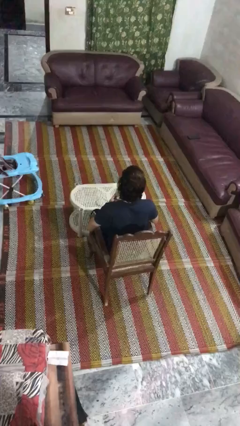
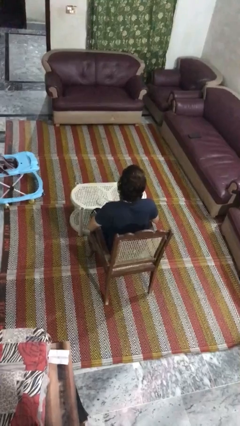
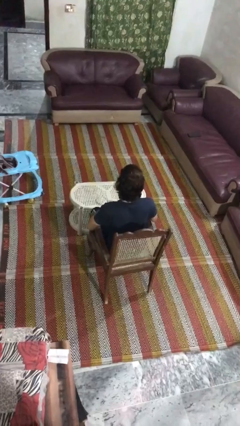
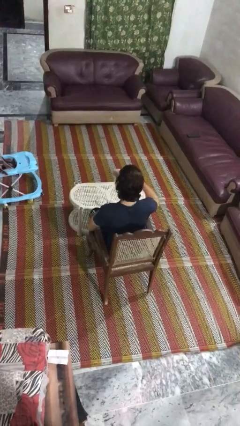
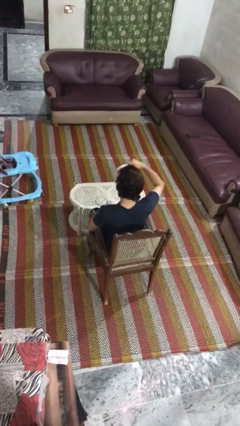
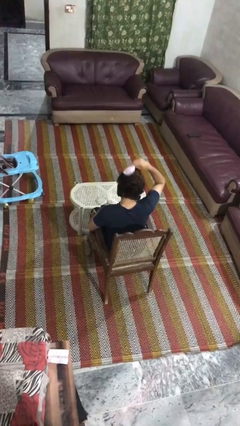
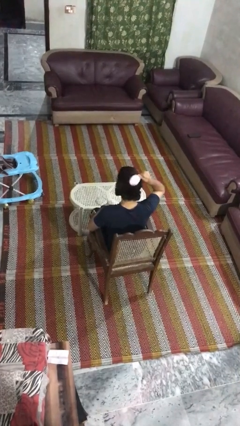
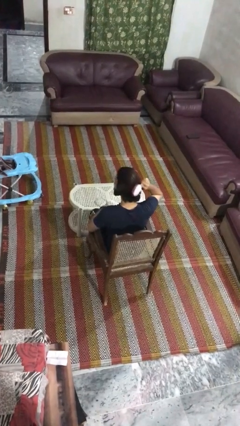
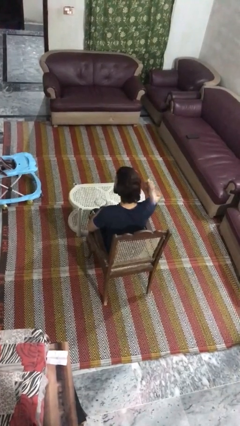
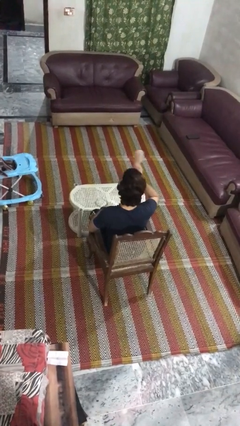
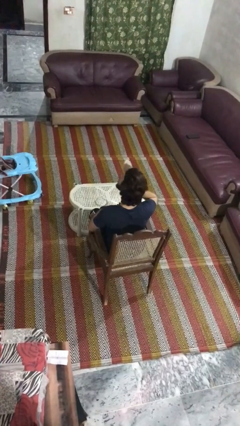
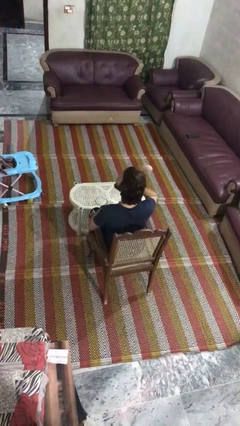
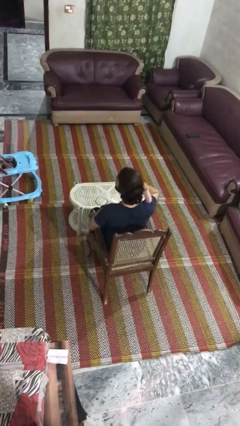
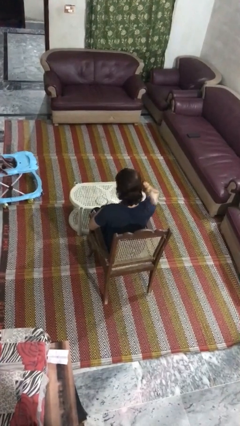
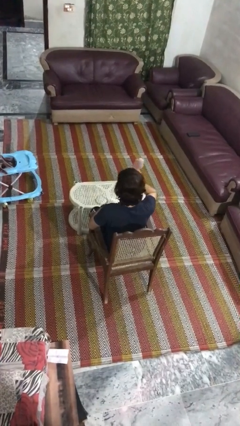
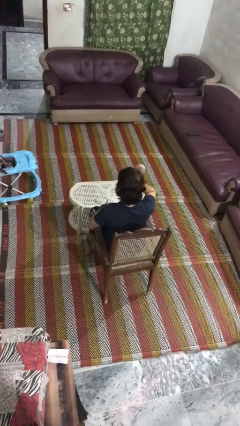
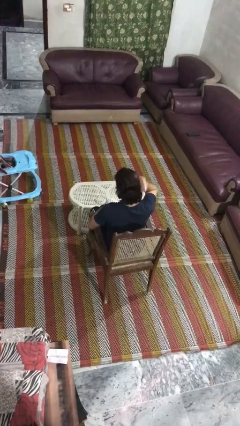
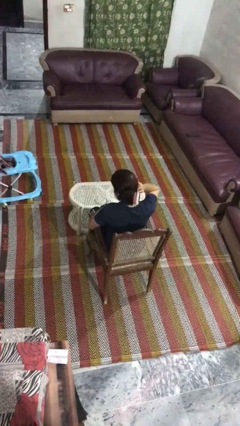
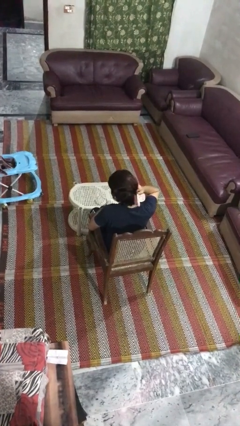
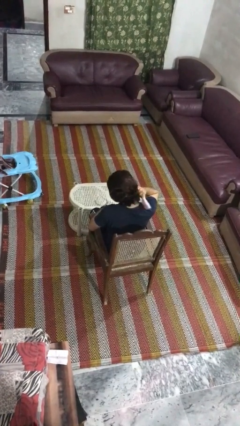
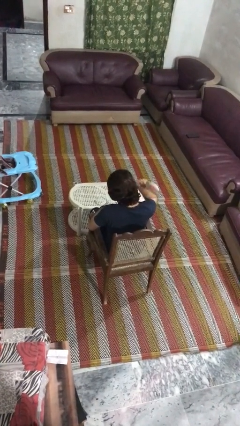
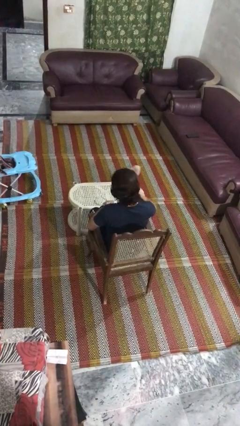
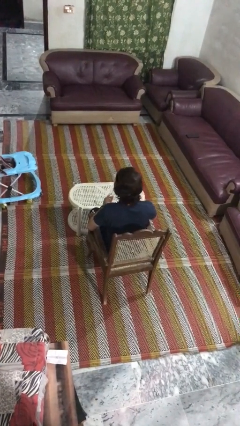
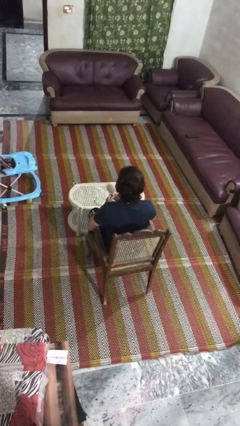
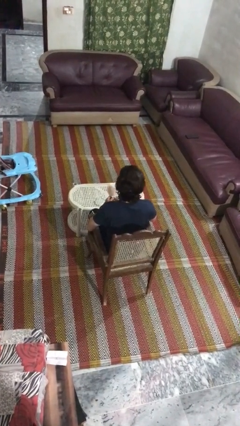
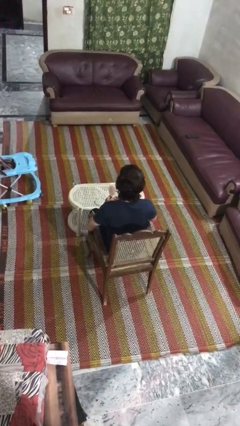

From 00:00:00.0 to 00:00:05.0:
person brushes hair

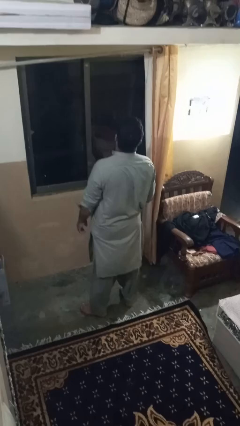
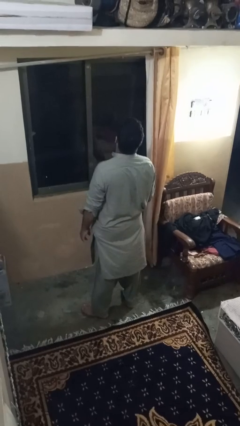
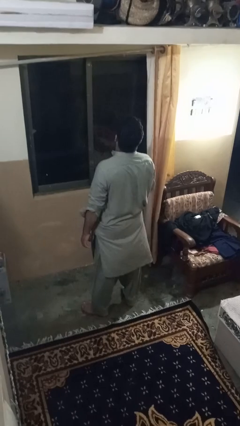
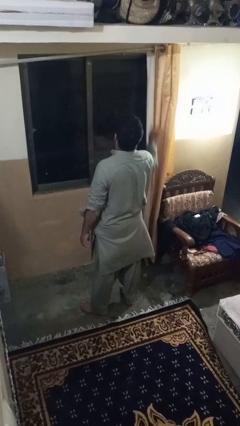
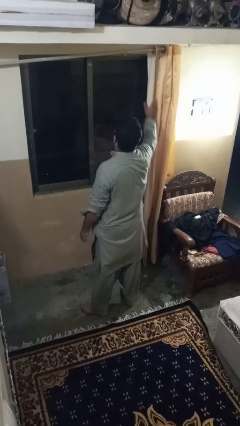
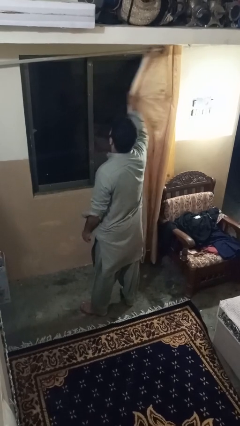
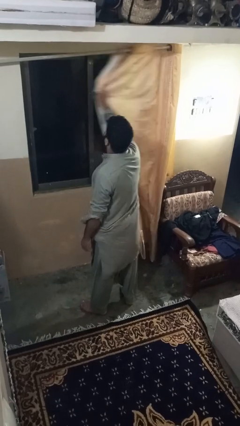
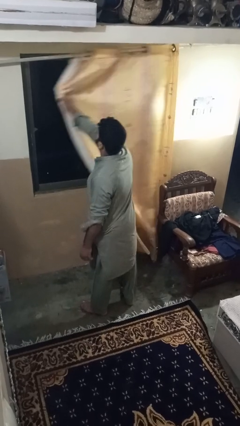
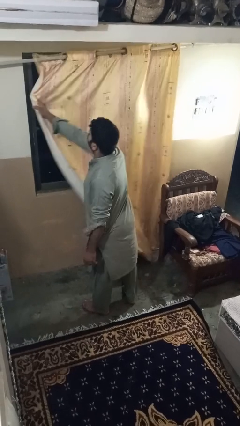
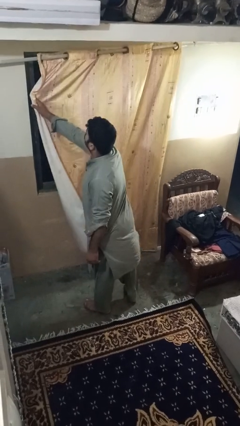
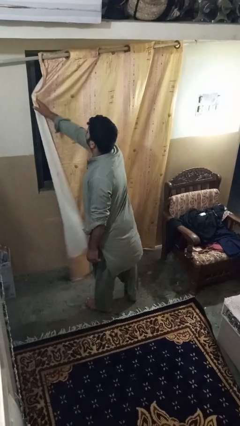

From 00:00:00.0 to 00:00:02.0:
person closes curtains

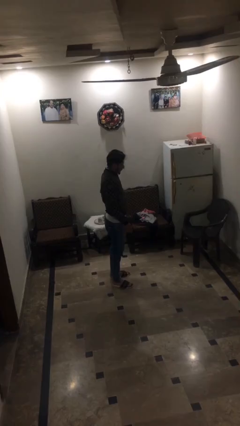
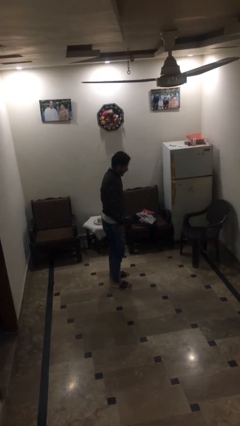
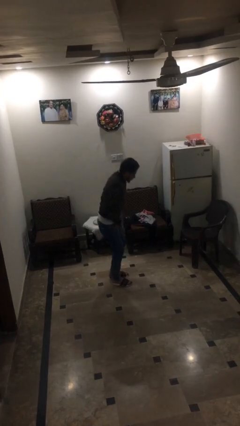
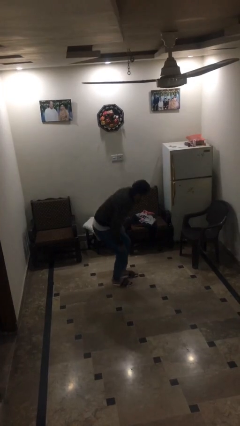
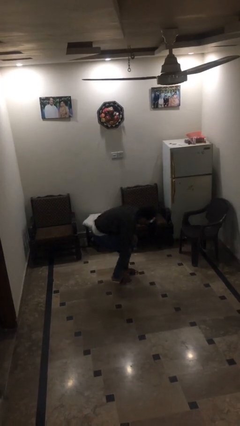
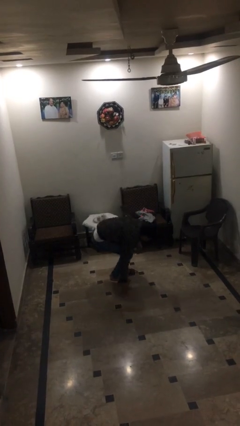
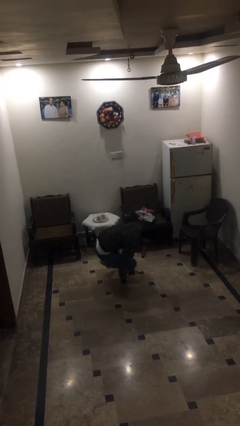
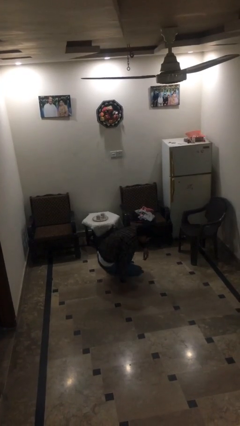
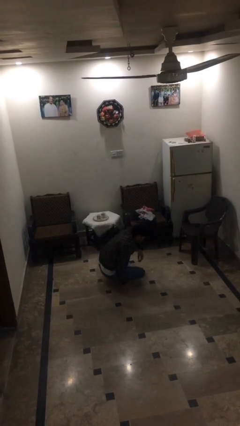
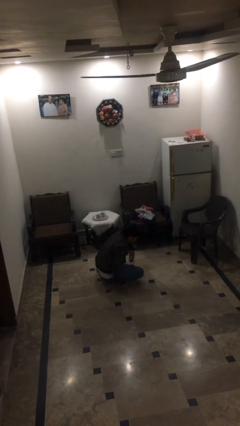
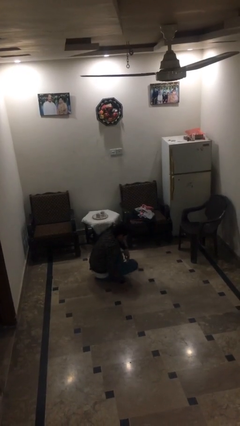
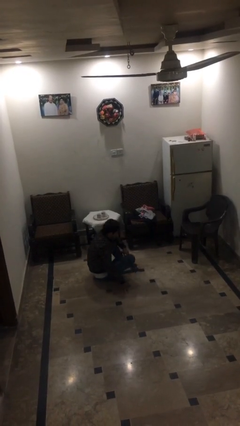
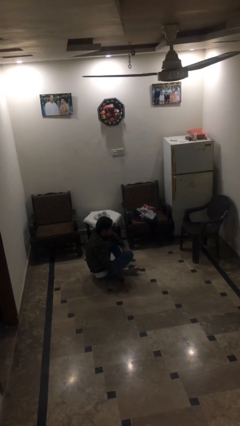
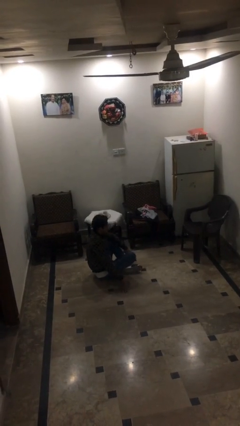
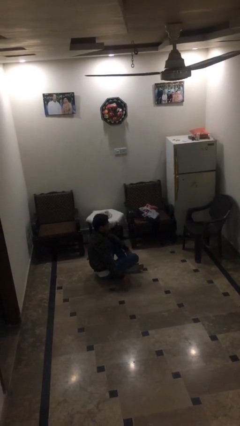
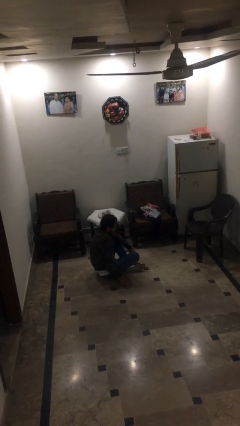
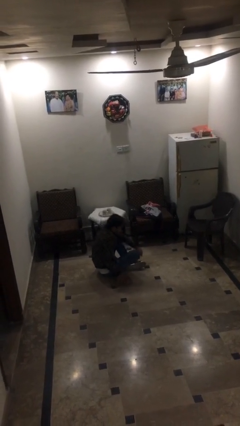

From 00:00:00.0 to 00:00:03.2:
person sits down

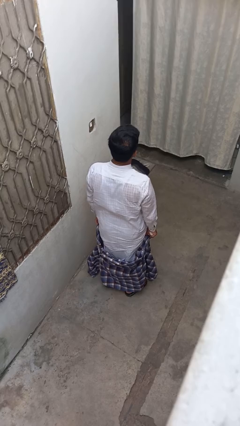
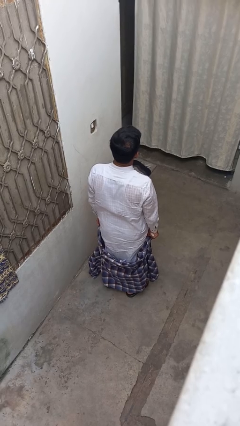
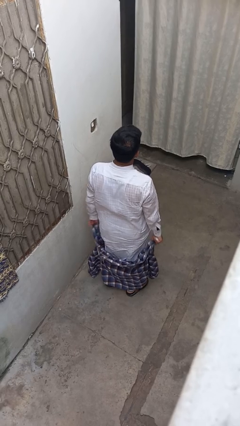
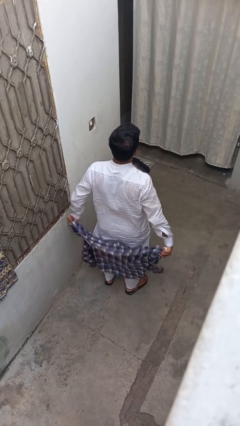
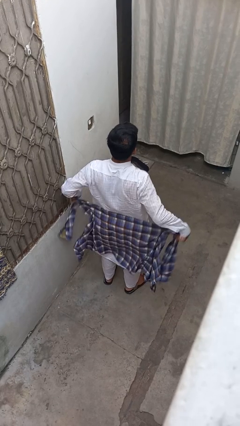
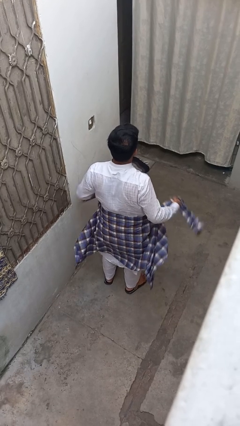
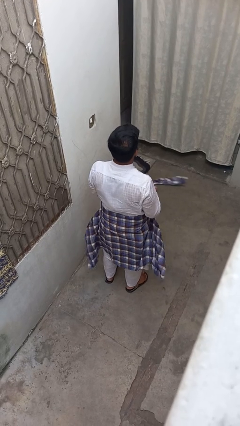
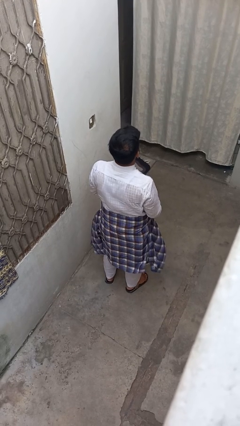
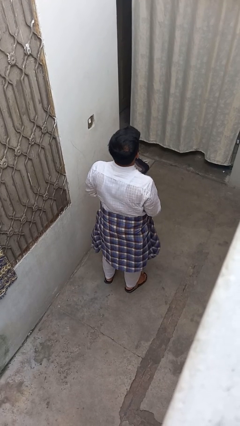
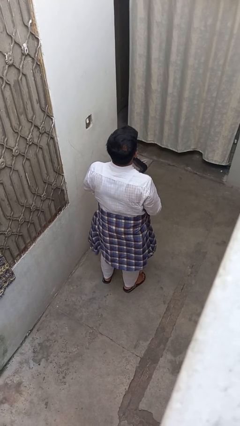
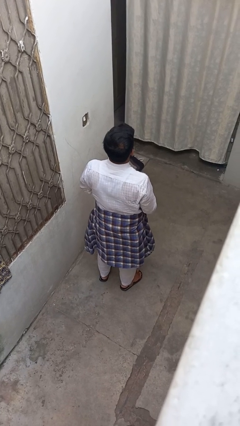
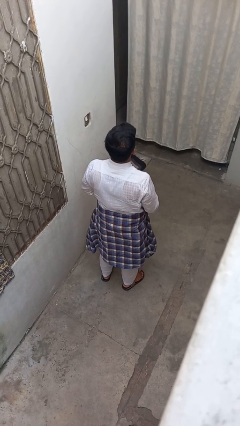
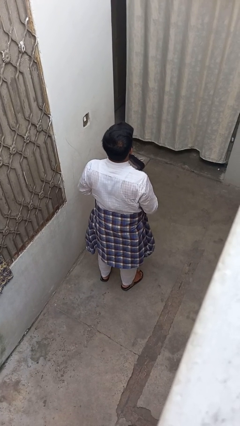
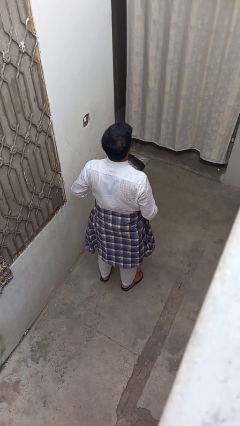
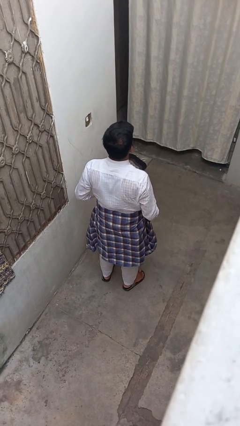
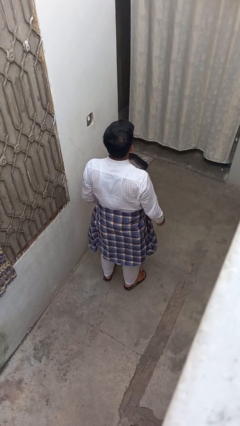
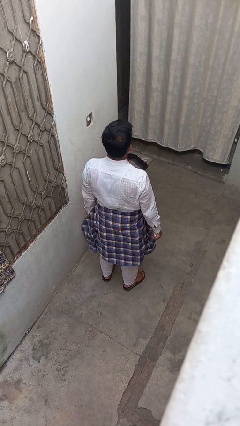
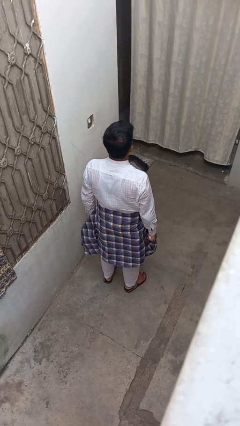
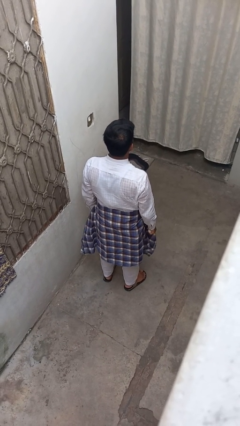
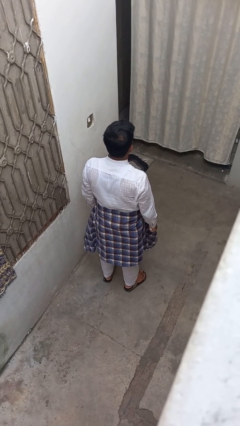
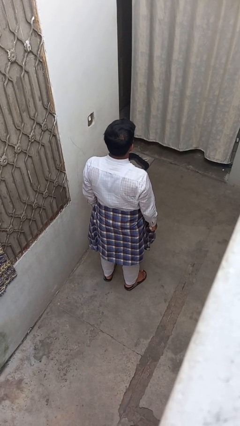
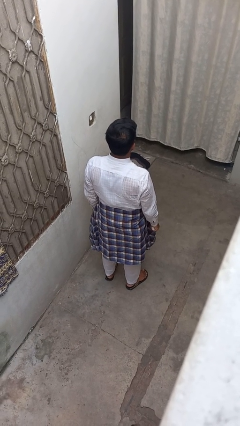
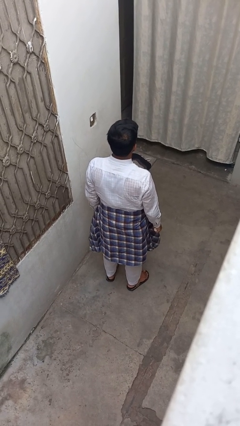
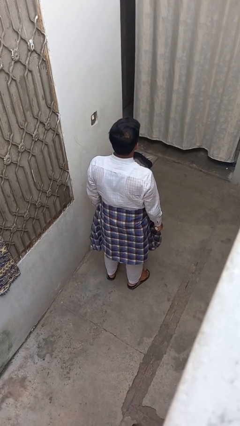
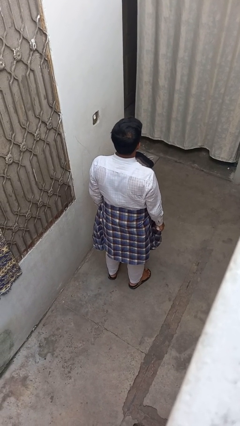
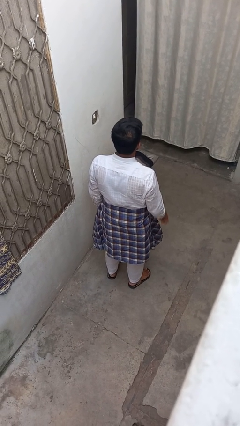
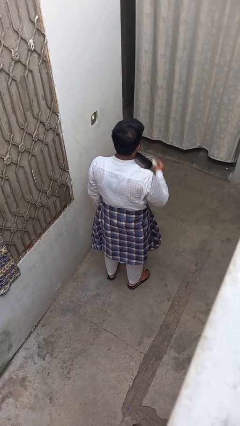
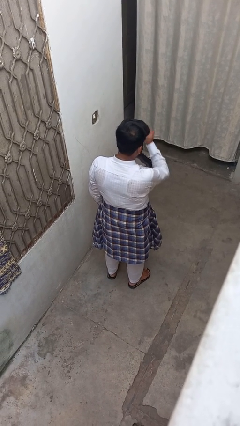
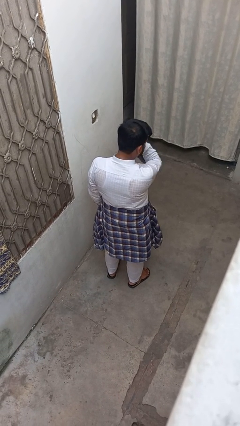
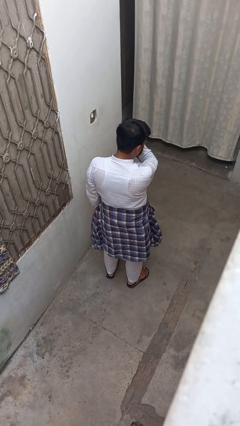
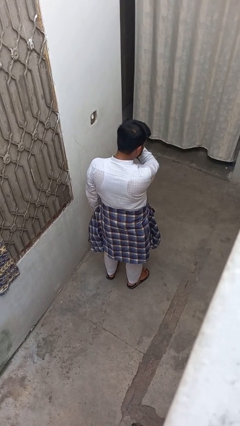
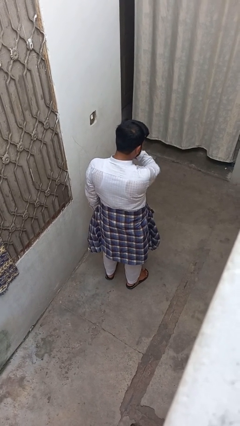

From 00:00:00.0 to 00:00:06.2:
person ties jacket around waist

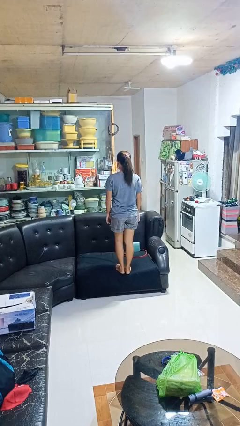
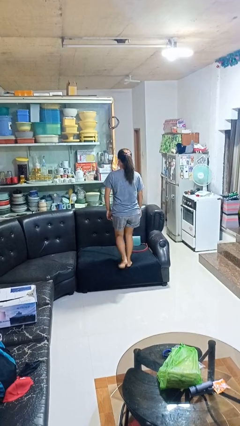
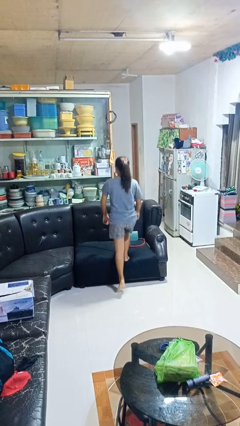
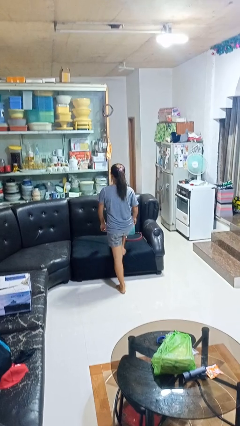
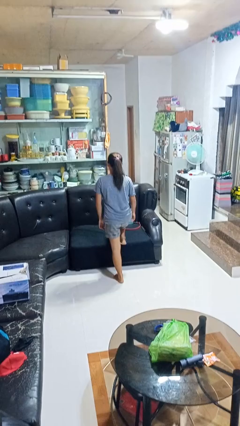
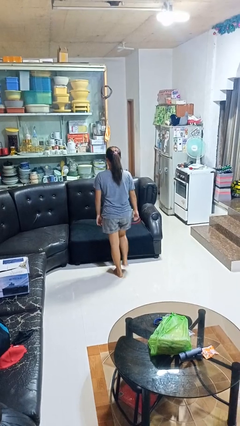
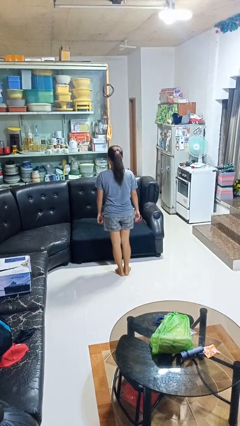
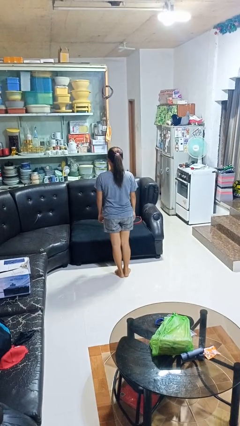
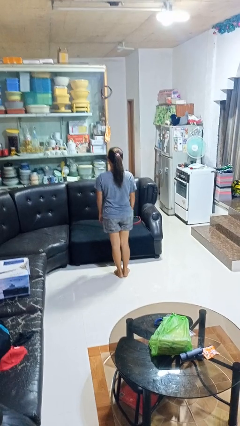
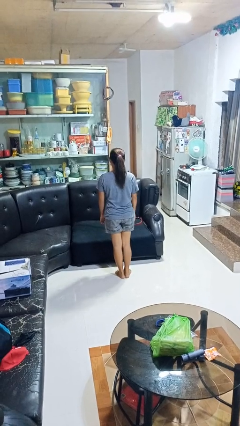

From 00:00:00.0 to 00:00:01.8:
person climbs off couch
